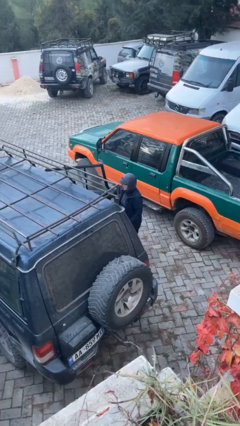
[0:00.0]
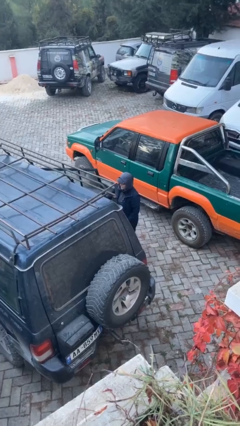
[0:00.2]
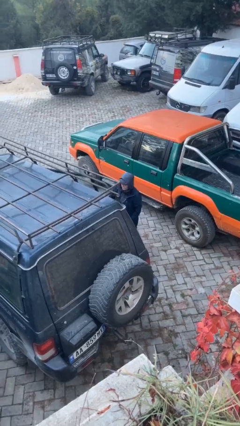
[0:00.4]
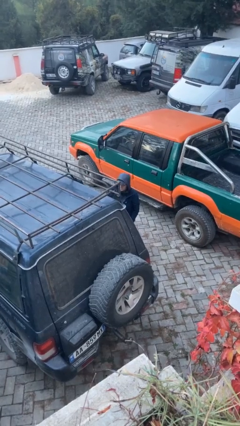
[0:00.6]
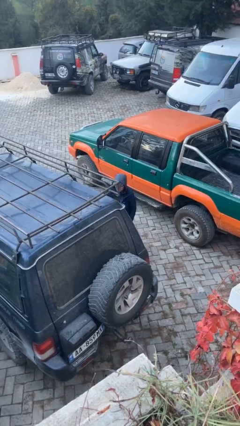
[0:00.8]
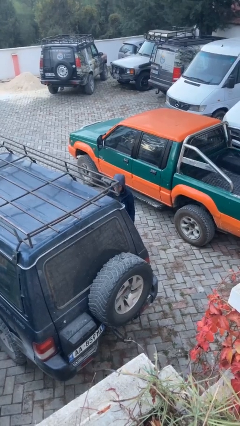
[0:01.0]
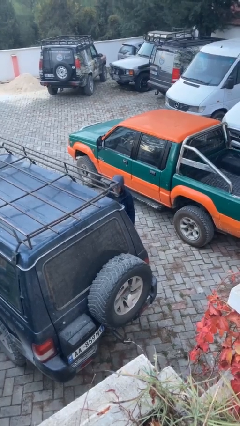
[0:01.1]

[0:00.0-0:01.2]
person closes car door

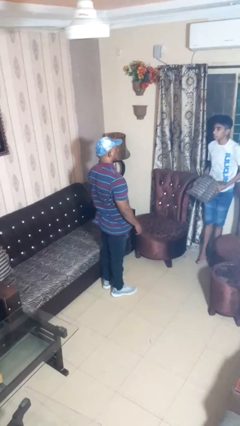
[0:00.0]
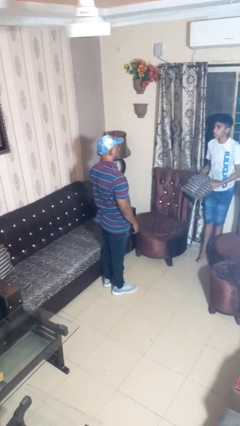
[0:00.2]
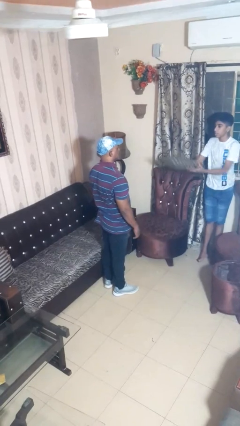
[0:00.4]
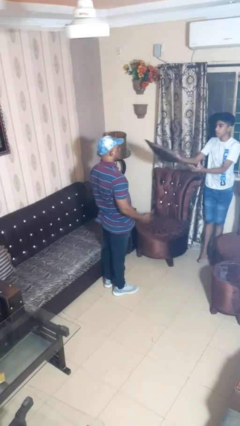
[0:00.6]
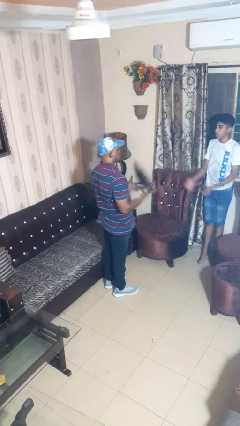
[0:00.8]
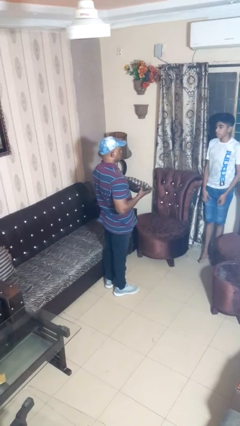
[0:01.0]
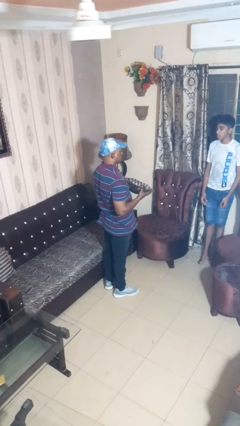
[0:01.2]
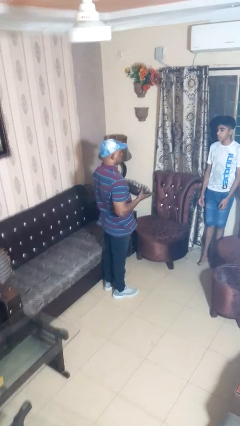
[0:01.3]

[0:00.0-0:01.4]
person catches object from person

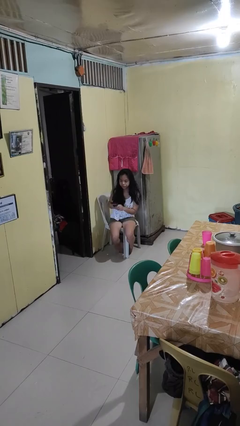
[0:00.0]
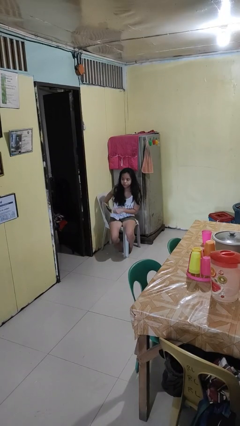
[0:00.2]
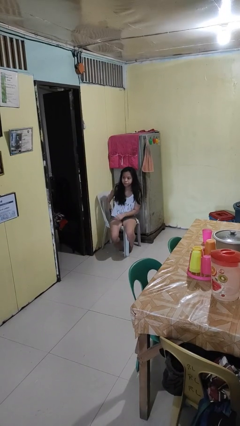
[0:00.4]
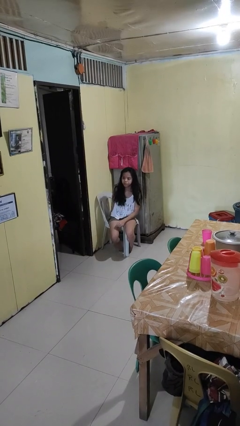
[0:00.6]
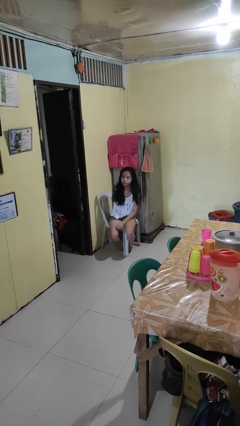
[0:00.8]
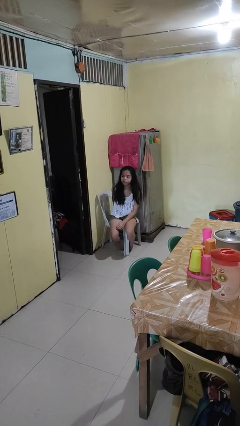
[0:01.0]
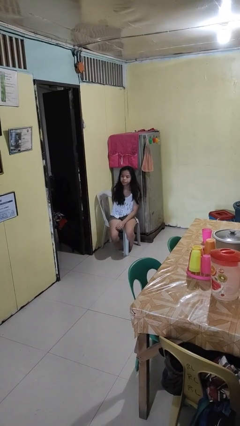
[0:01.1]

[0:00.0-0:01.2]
person puts phone into pocket

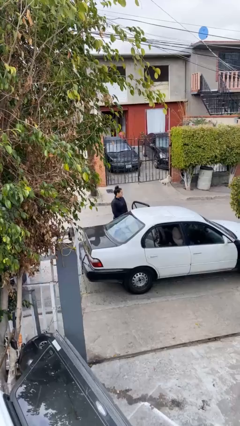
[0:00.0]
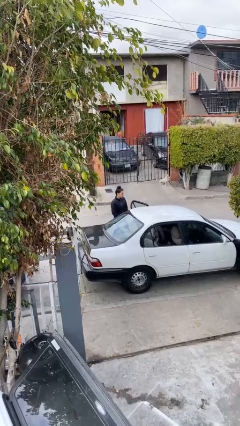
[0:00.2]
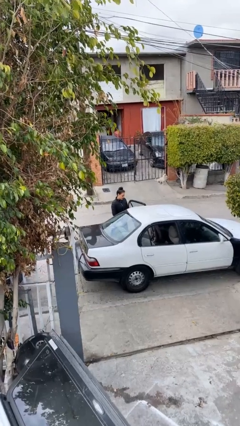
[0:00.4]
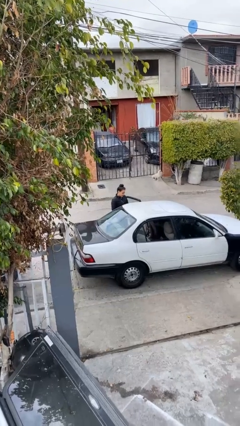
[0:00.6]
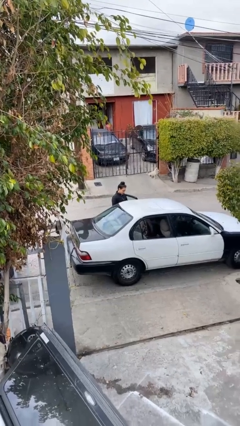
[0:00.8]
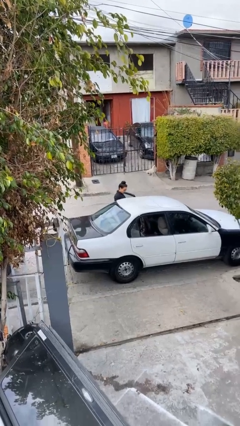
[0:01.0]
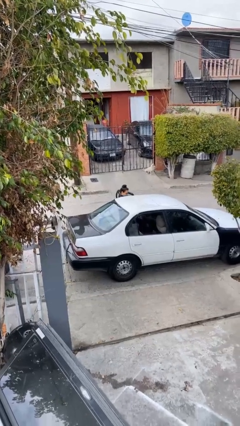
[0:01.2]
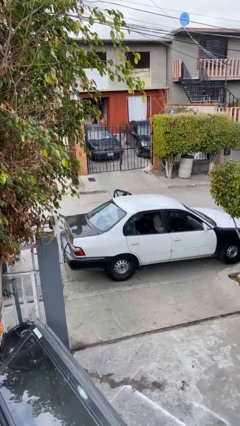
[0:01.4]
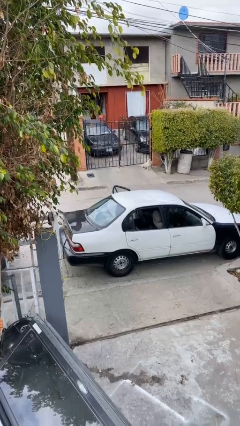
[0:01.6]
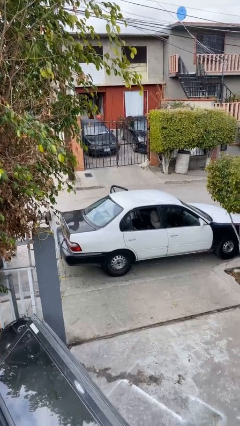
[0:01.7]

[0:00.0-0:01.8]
person enters car

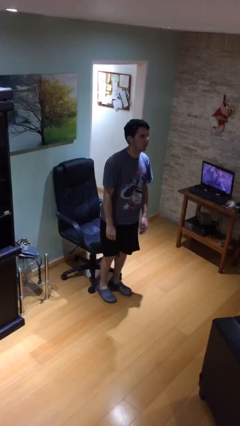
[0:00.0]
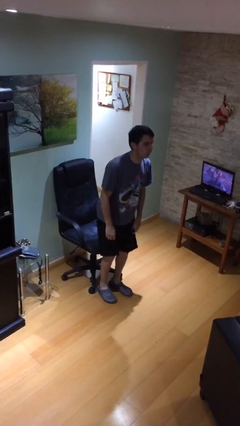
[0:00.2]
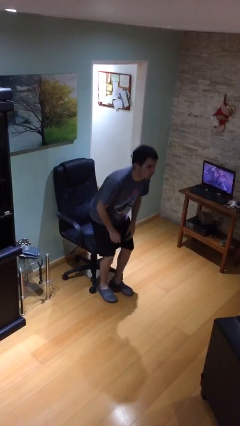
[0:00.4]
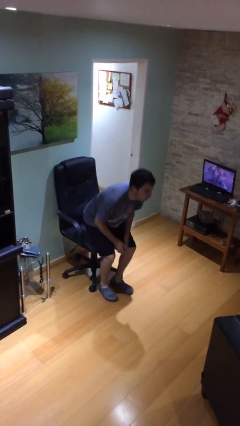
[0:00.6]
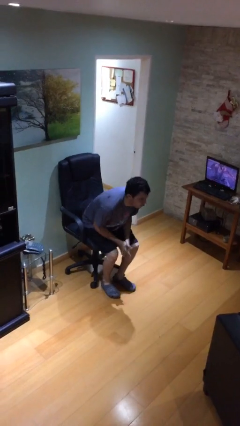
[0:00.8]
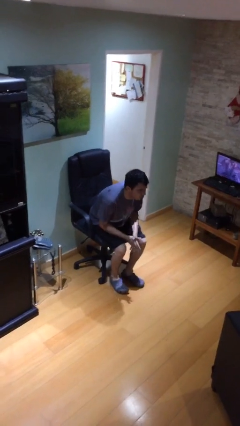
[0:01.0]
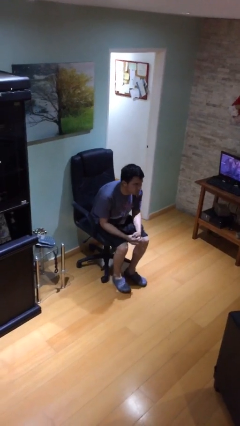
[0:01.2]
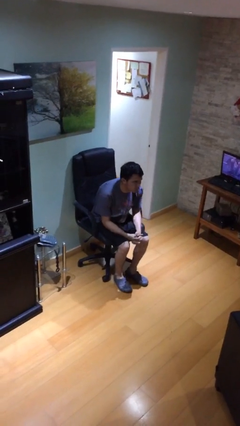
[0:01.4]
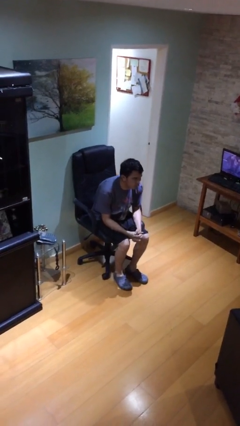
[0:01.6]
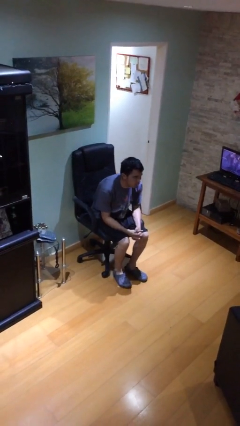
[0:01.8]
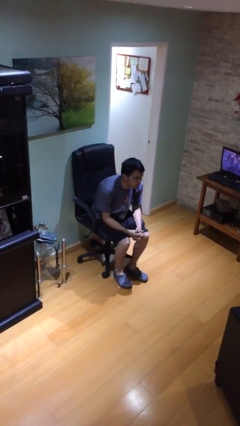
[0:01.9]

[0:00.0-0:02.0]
person sits down

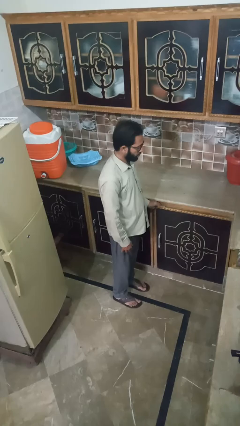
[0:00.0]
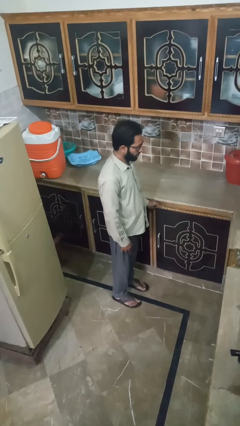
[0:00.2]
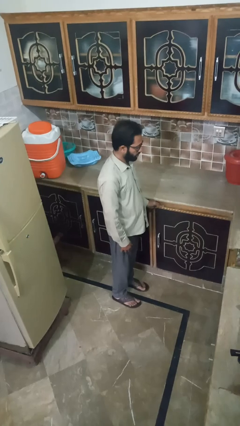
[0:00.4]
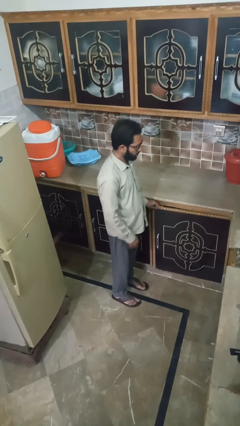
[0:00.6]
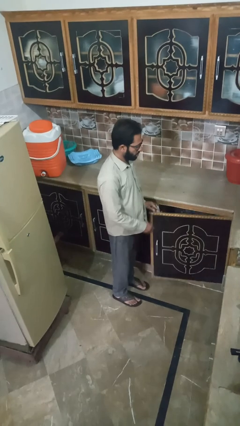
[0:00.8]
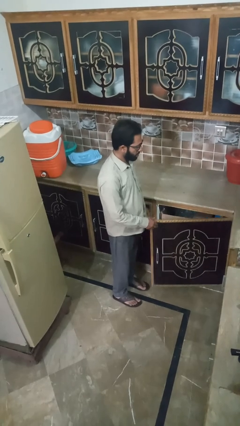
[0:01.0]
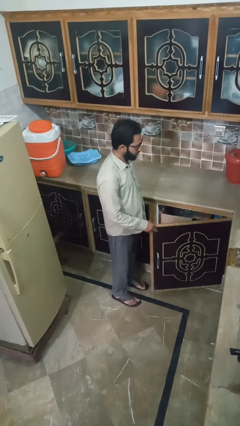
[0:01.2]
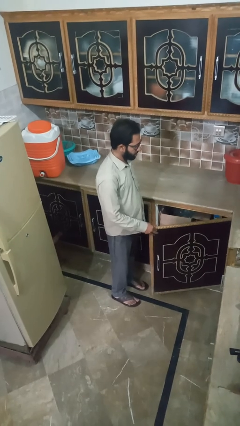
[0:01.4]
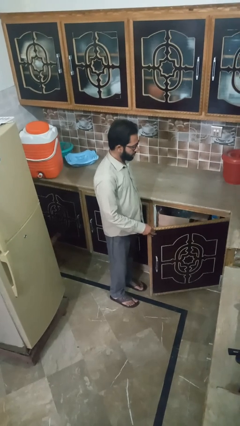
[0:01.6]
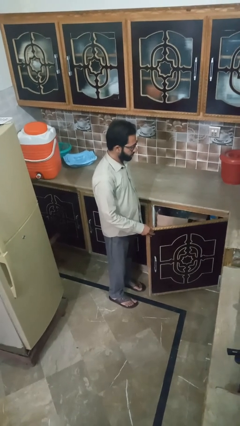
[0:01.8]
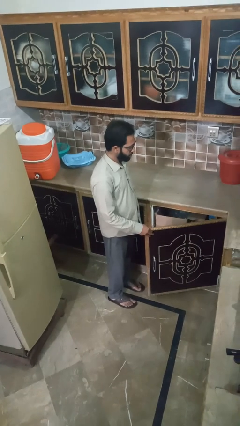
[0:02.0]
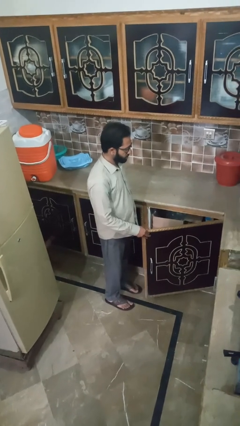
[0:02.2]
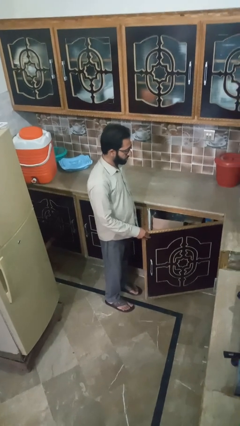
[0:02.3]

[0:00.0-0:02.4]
person opens cabinet

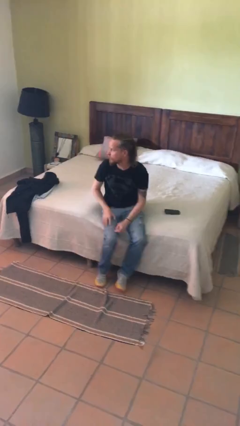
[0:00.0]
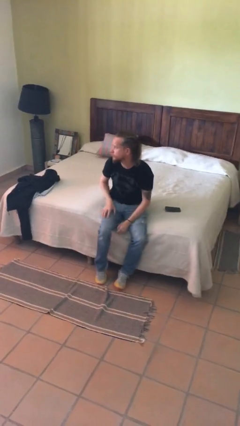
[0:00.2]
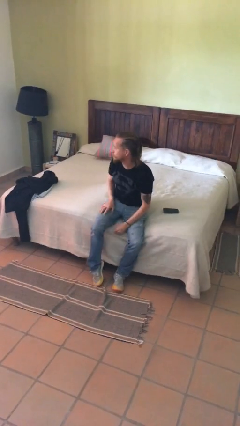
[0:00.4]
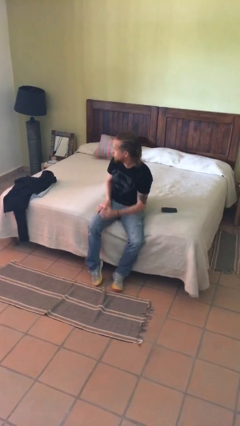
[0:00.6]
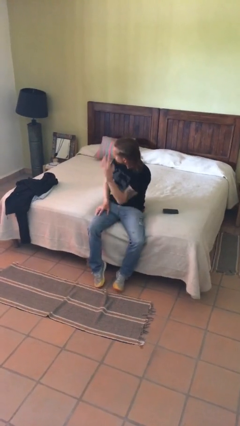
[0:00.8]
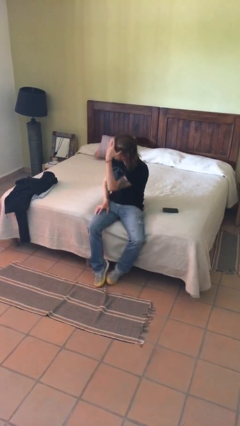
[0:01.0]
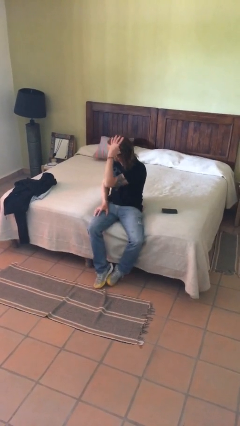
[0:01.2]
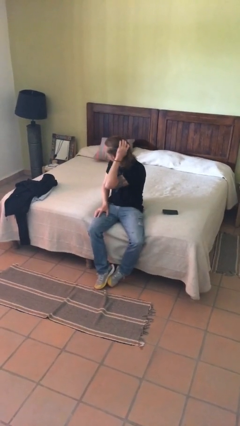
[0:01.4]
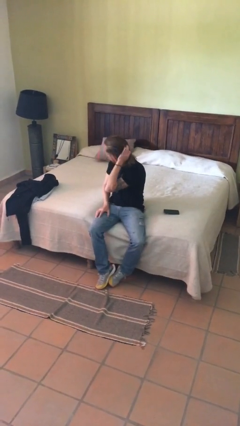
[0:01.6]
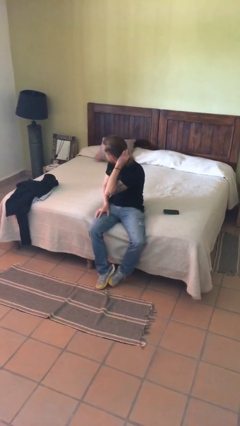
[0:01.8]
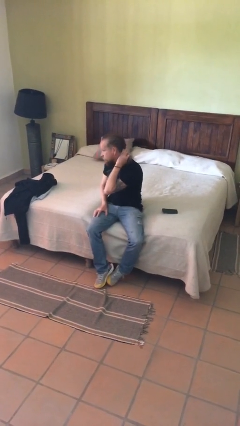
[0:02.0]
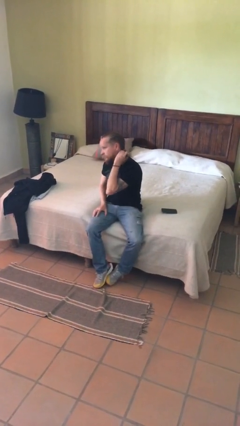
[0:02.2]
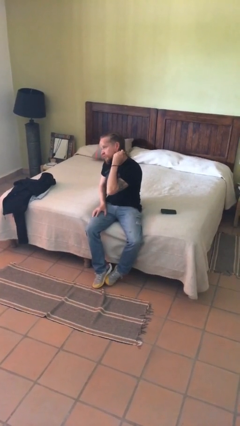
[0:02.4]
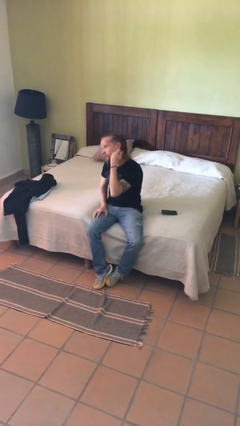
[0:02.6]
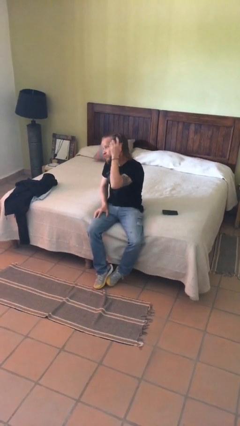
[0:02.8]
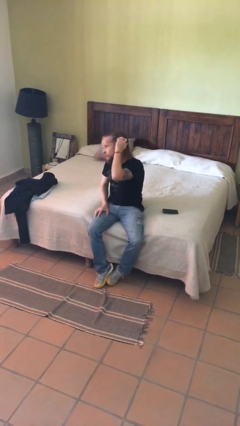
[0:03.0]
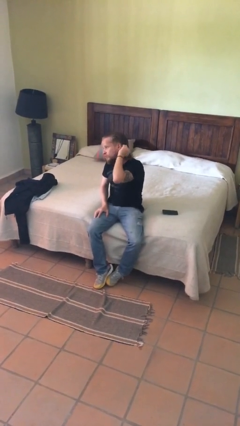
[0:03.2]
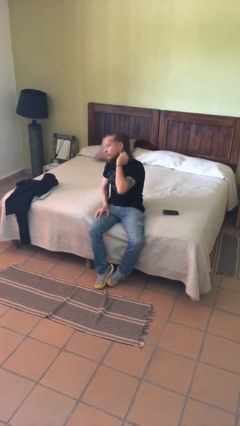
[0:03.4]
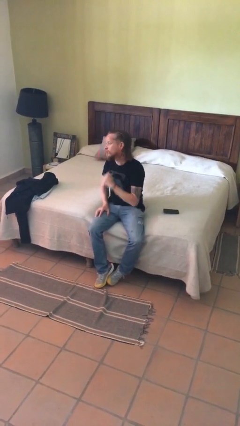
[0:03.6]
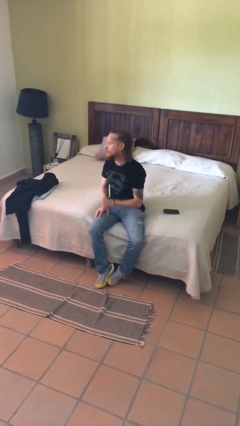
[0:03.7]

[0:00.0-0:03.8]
person strokes hair

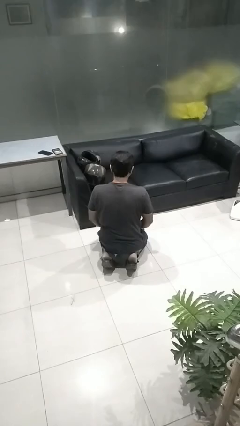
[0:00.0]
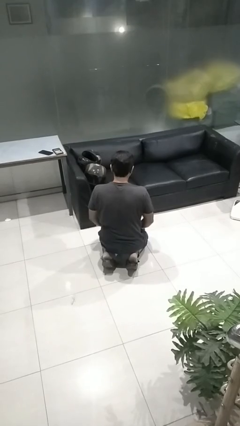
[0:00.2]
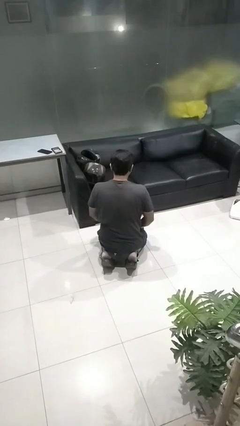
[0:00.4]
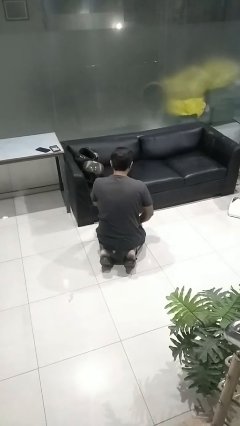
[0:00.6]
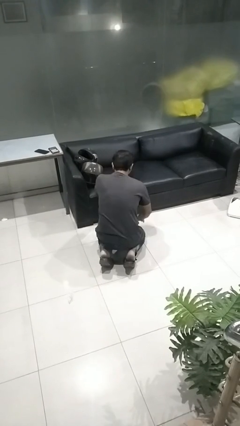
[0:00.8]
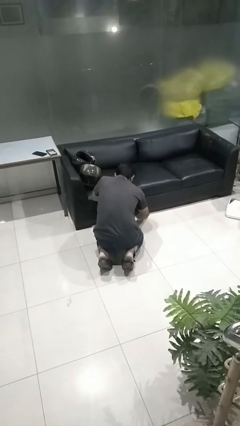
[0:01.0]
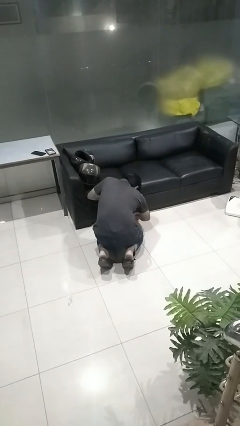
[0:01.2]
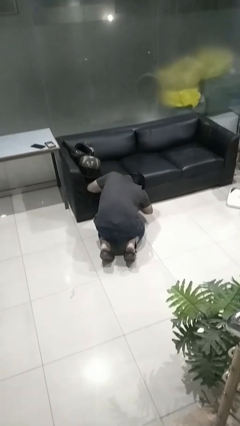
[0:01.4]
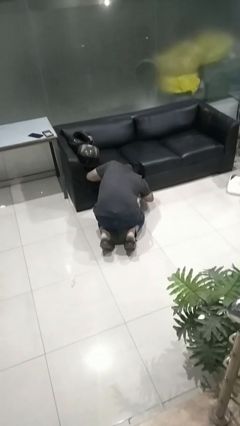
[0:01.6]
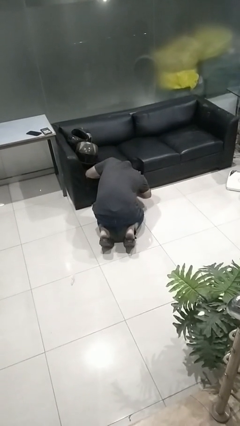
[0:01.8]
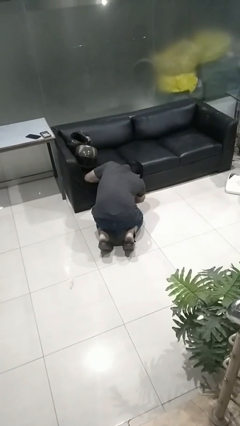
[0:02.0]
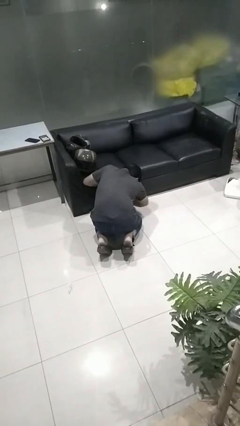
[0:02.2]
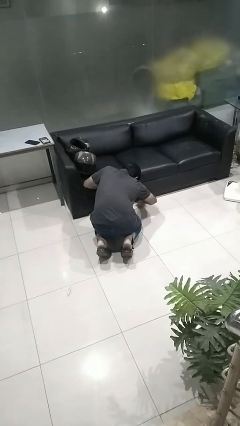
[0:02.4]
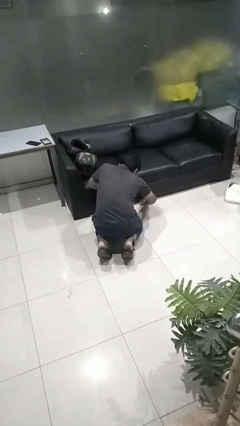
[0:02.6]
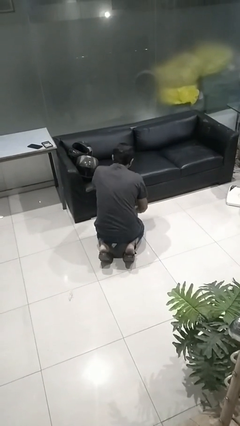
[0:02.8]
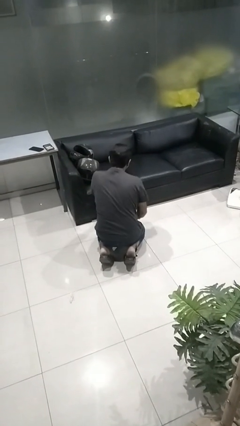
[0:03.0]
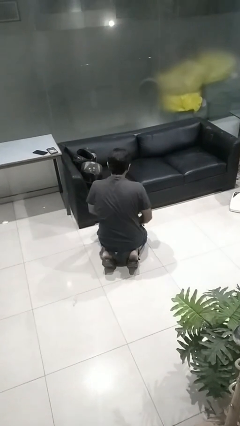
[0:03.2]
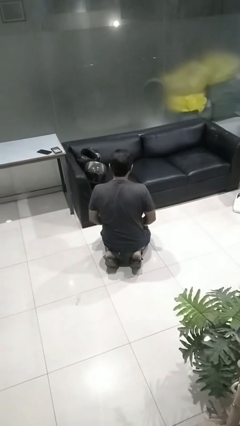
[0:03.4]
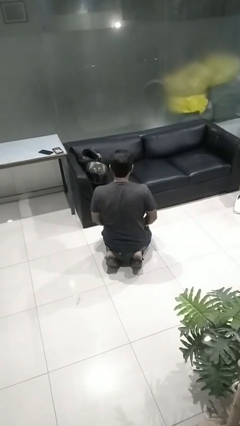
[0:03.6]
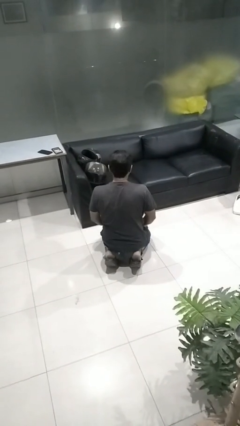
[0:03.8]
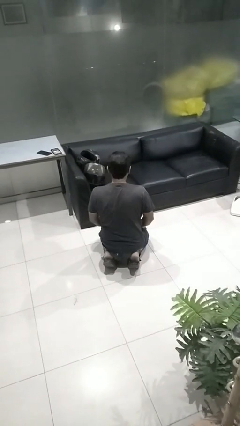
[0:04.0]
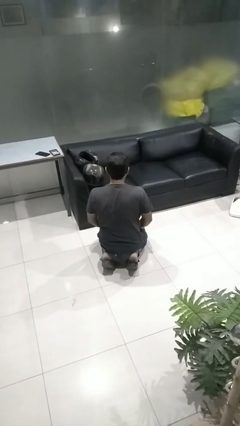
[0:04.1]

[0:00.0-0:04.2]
person searches under couch
